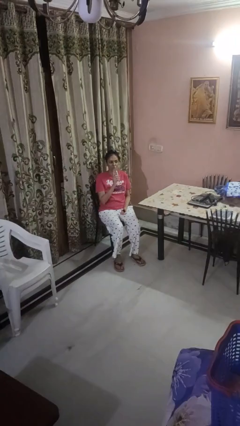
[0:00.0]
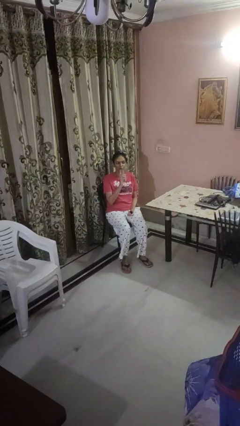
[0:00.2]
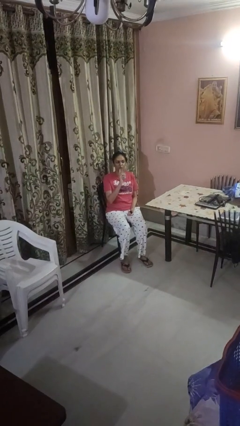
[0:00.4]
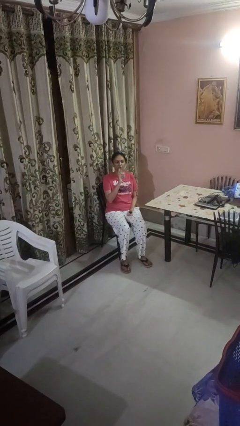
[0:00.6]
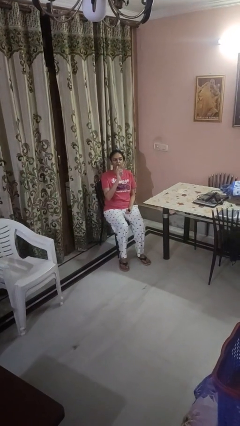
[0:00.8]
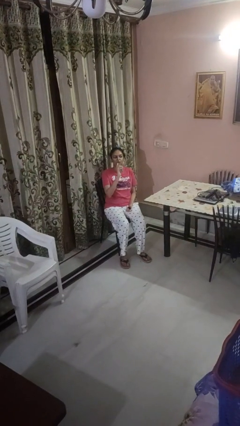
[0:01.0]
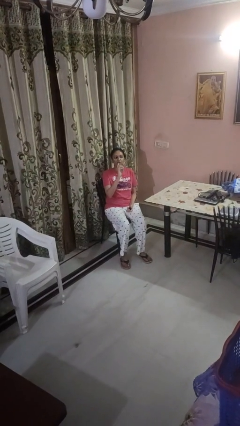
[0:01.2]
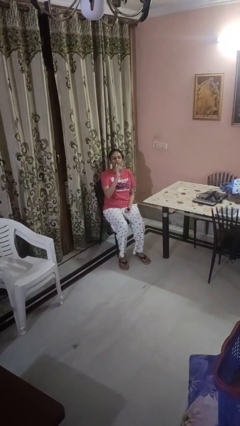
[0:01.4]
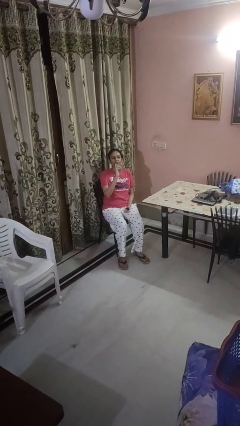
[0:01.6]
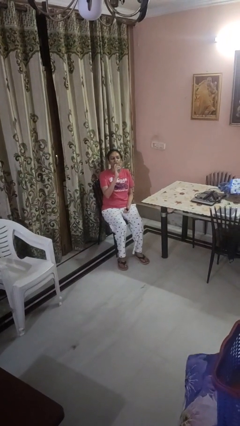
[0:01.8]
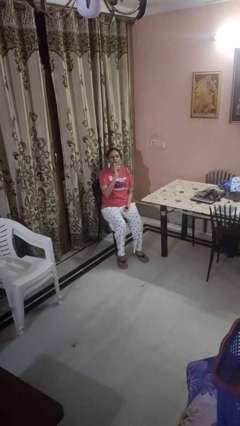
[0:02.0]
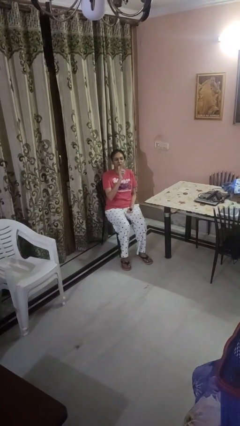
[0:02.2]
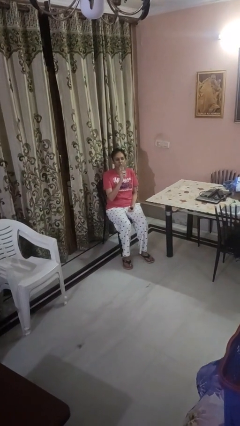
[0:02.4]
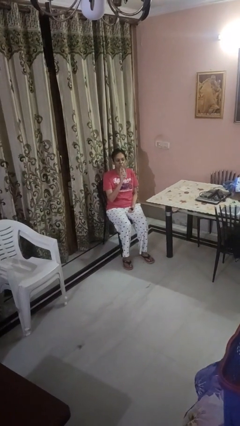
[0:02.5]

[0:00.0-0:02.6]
person drinks from bottle

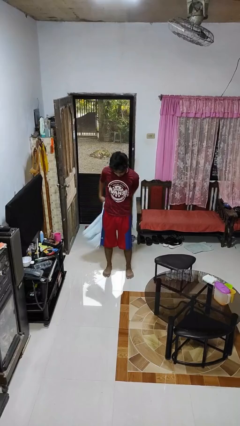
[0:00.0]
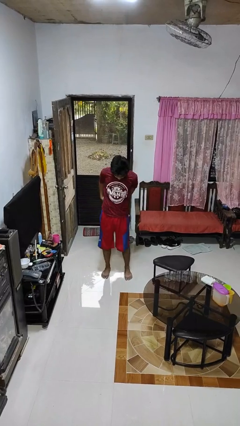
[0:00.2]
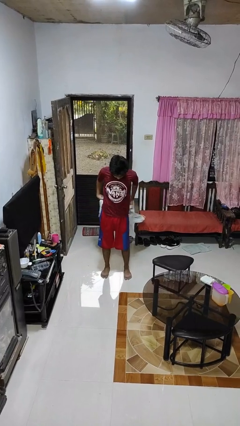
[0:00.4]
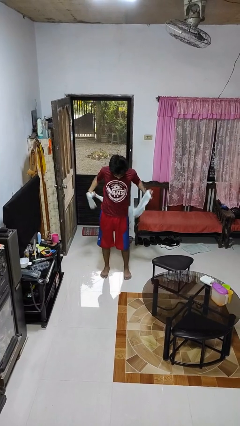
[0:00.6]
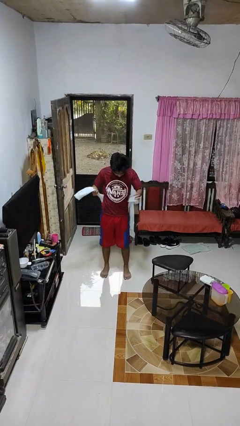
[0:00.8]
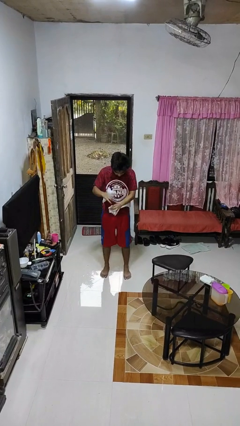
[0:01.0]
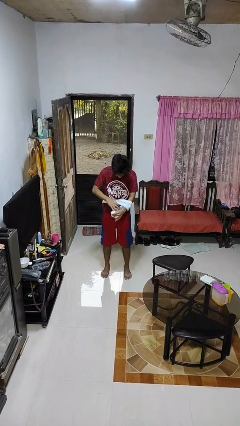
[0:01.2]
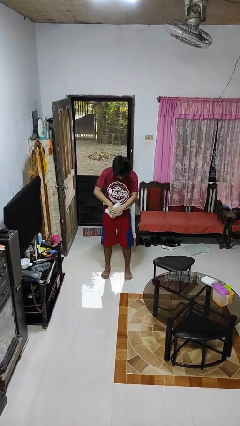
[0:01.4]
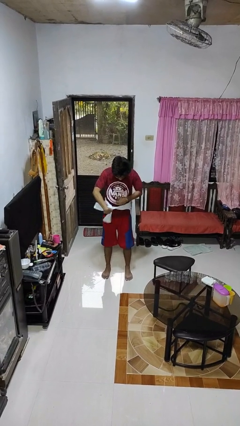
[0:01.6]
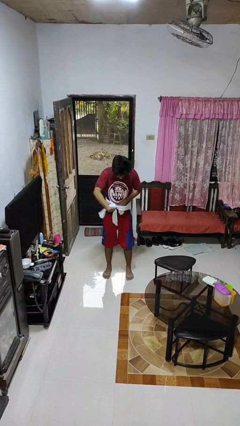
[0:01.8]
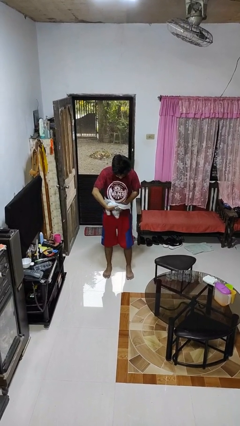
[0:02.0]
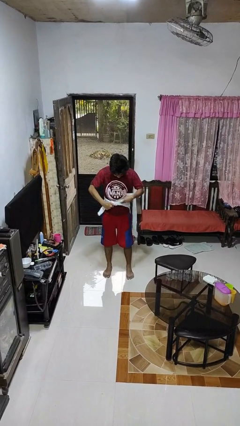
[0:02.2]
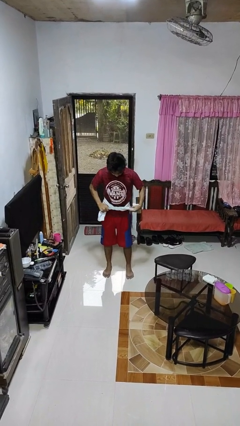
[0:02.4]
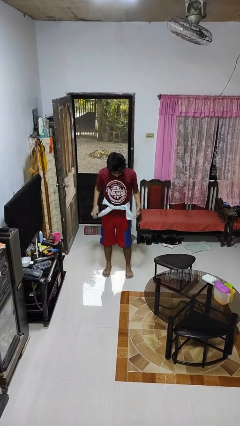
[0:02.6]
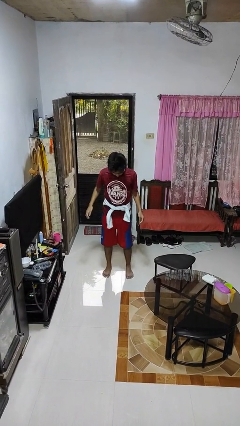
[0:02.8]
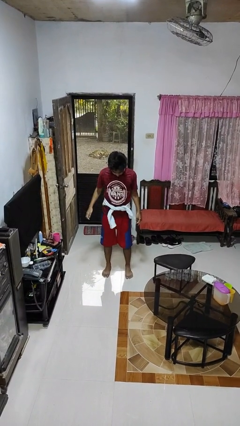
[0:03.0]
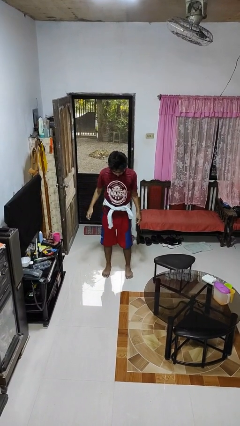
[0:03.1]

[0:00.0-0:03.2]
person ties jacket around waist

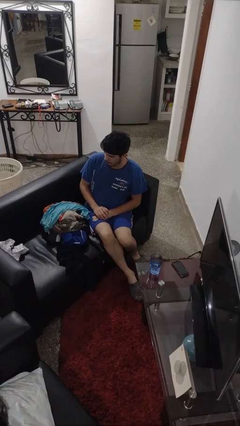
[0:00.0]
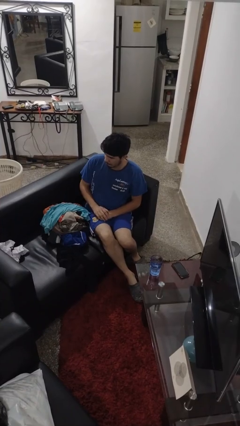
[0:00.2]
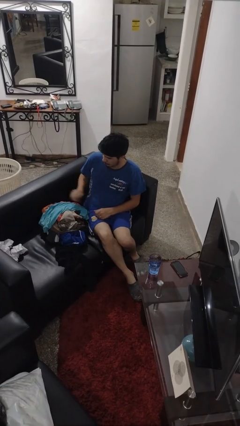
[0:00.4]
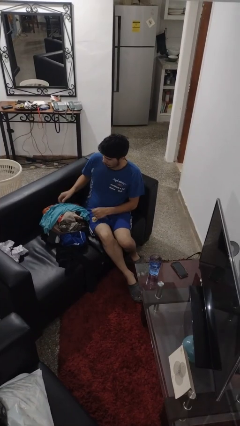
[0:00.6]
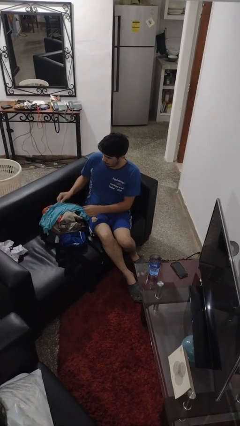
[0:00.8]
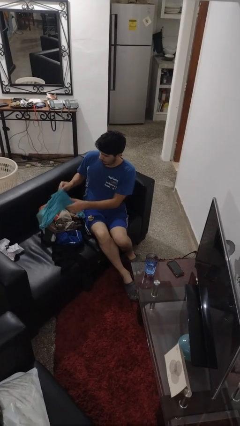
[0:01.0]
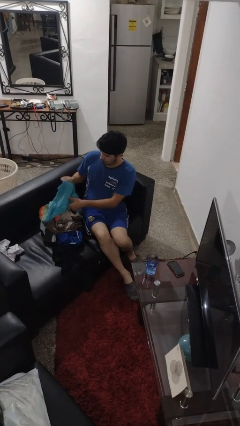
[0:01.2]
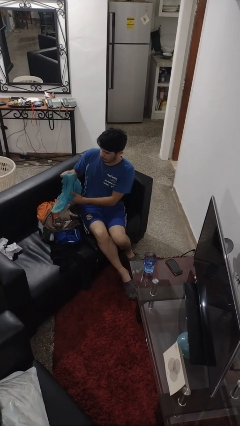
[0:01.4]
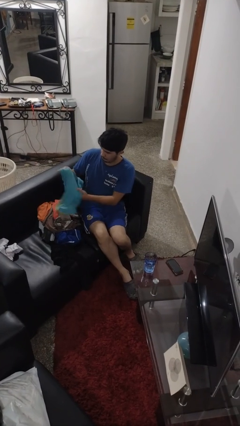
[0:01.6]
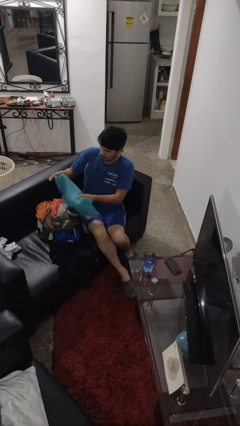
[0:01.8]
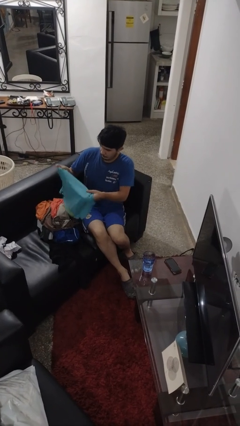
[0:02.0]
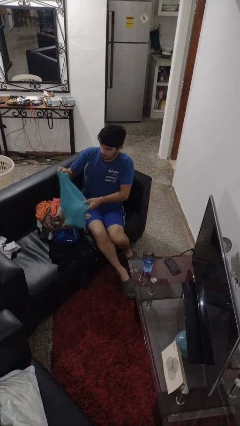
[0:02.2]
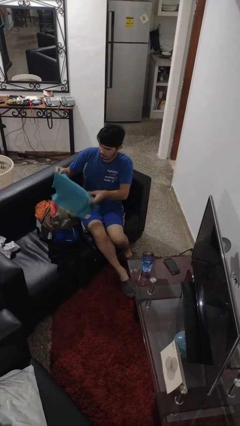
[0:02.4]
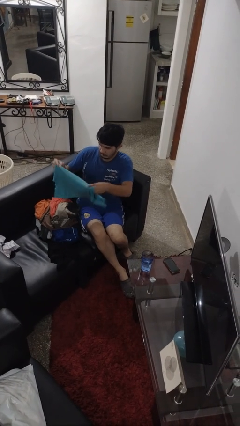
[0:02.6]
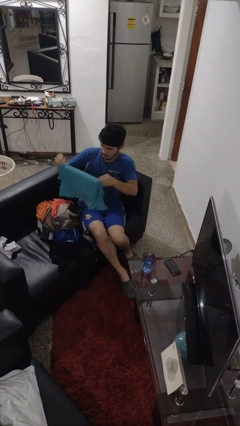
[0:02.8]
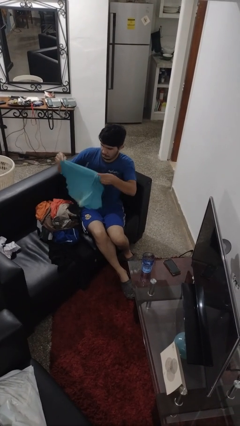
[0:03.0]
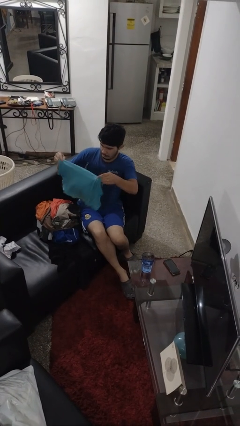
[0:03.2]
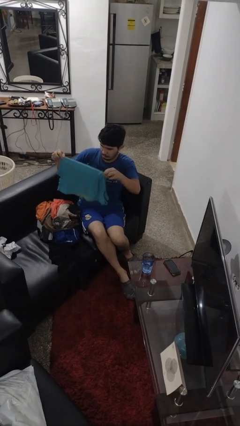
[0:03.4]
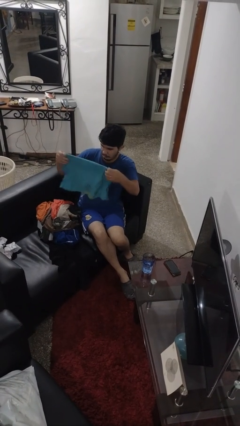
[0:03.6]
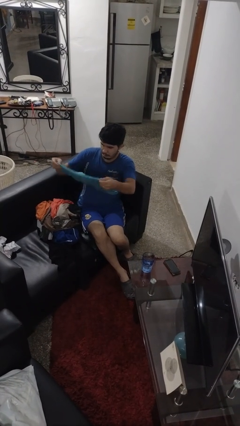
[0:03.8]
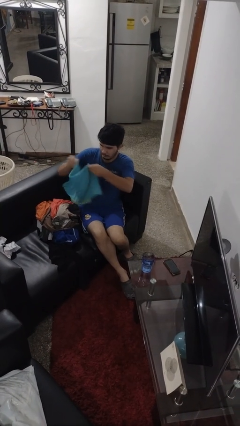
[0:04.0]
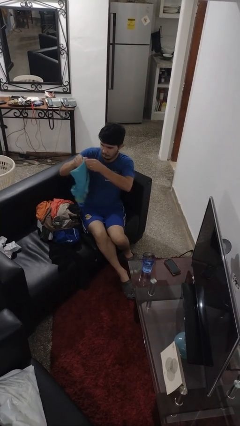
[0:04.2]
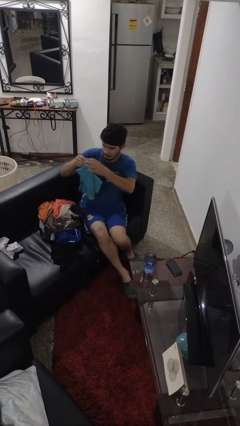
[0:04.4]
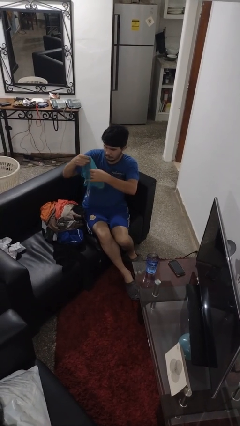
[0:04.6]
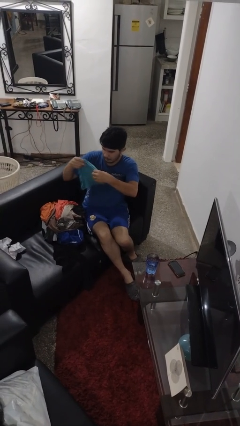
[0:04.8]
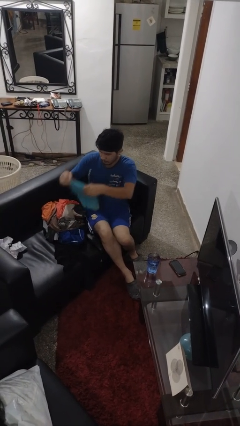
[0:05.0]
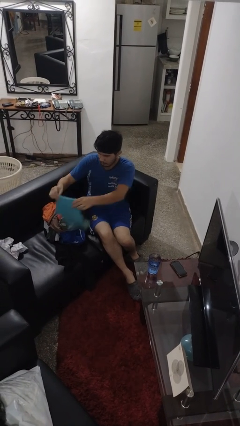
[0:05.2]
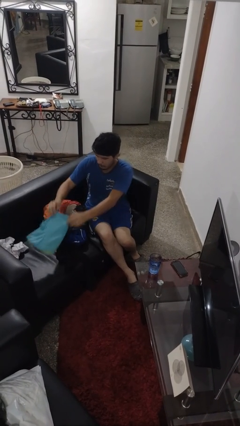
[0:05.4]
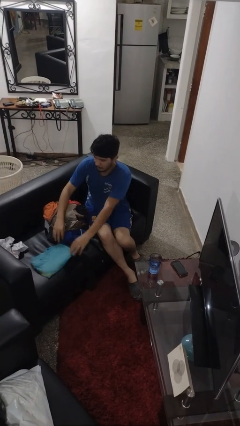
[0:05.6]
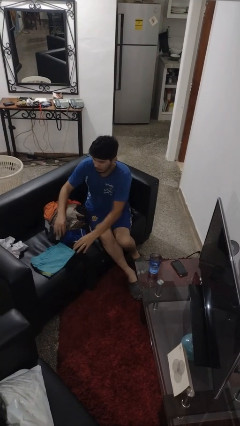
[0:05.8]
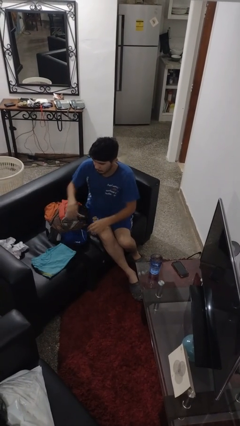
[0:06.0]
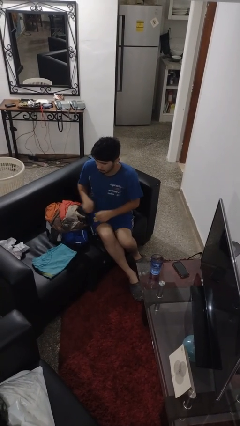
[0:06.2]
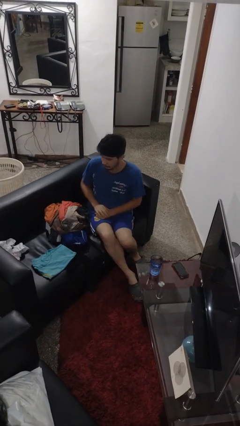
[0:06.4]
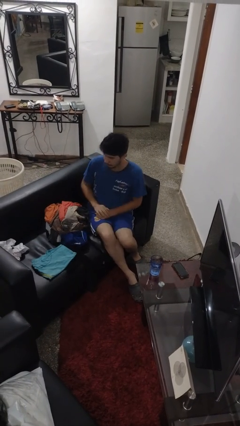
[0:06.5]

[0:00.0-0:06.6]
person folds shirt

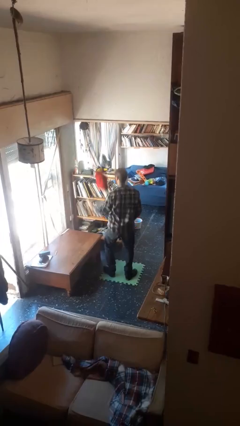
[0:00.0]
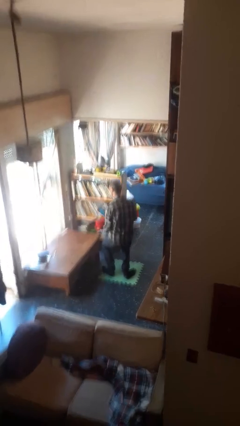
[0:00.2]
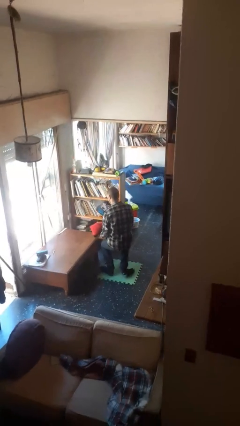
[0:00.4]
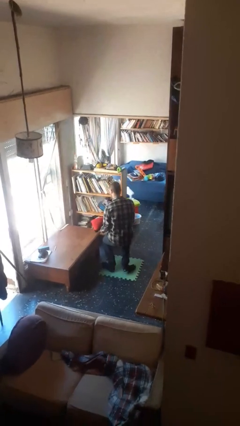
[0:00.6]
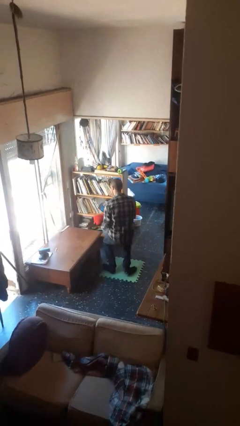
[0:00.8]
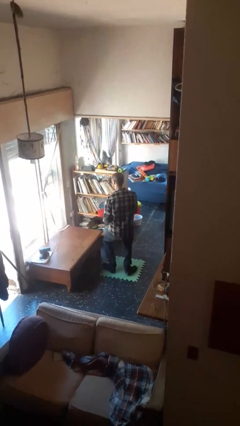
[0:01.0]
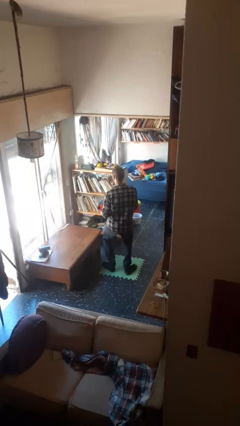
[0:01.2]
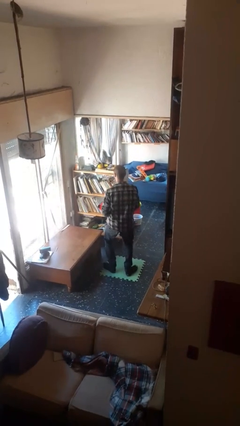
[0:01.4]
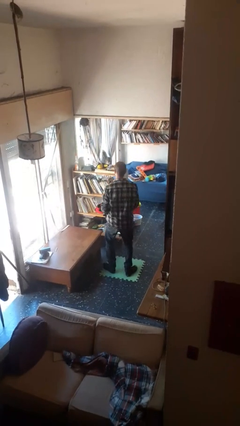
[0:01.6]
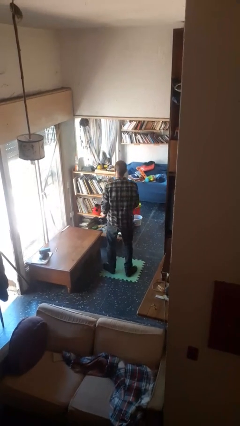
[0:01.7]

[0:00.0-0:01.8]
person catches dropped object

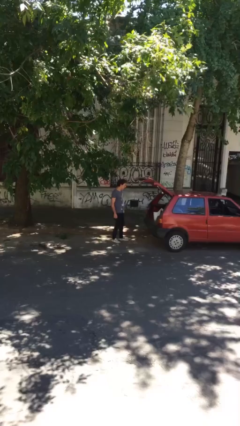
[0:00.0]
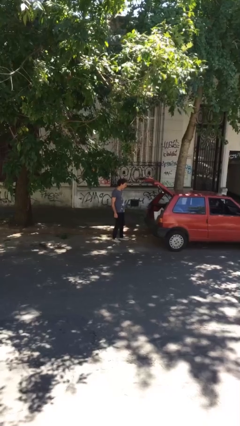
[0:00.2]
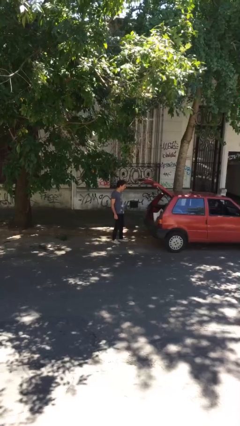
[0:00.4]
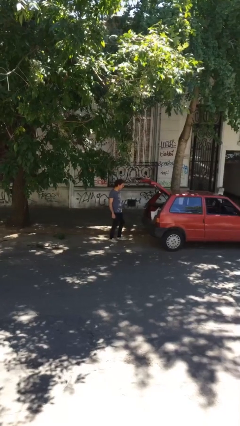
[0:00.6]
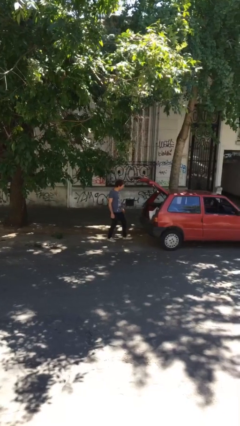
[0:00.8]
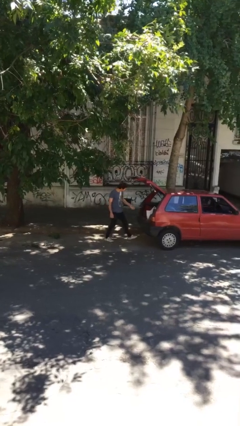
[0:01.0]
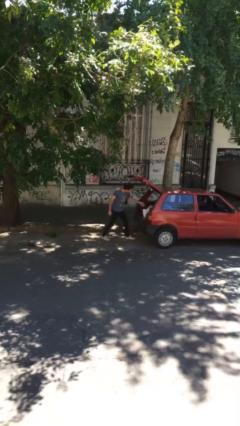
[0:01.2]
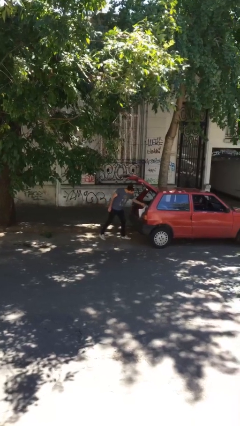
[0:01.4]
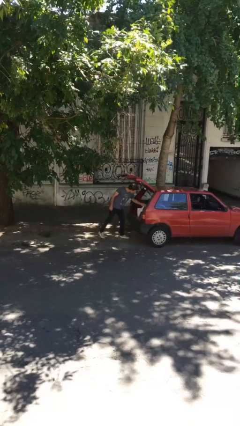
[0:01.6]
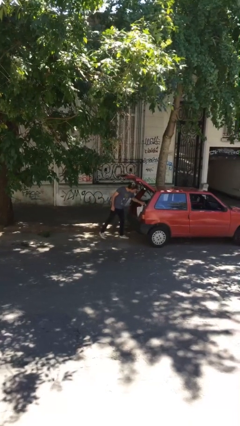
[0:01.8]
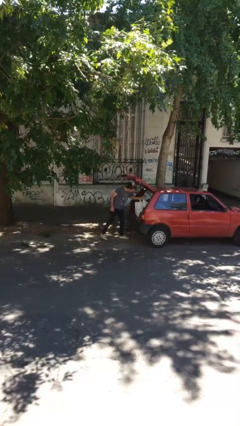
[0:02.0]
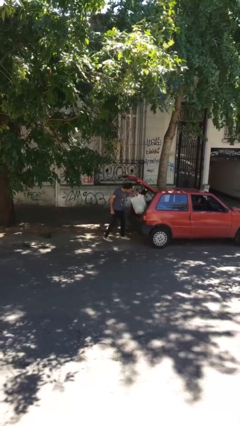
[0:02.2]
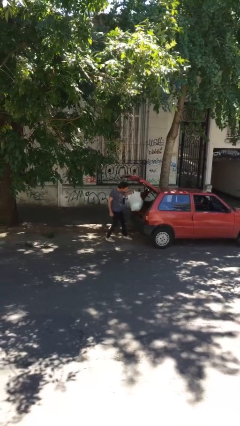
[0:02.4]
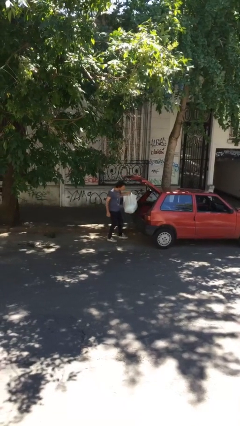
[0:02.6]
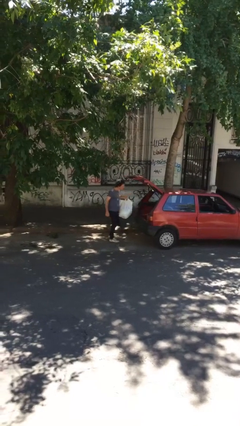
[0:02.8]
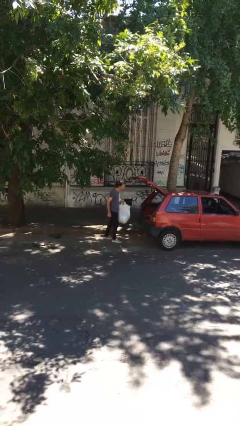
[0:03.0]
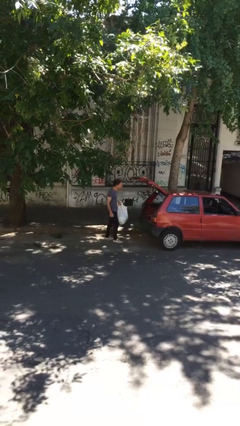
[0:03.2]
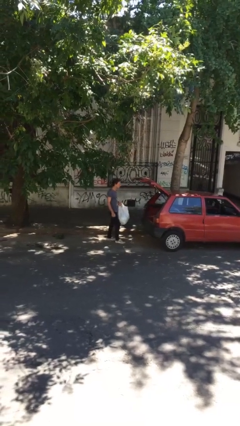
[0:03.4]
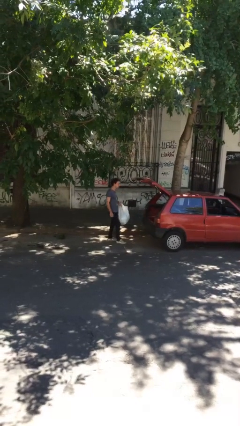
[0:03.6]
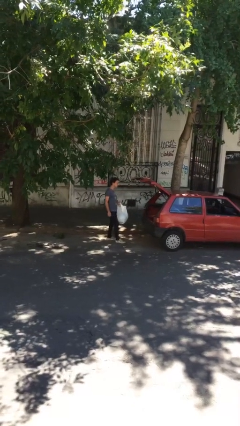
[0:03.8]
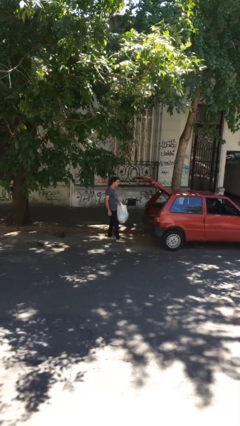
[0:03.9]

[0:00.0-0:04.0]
person unloads car
